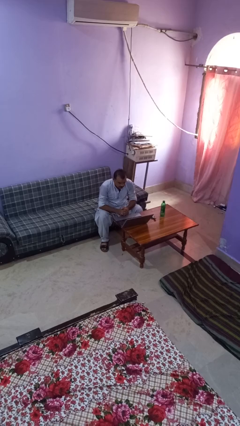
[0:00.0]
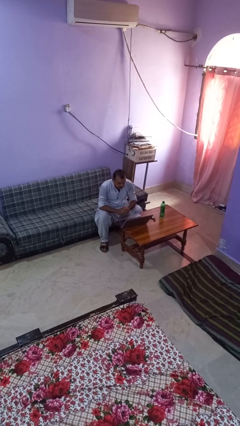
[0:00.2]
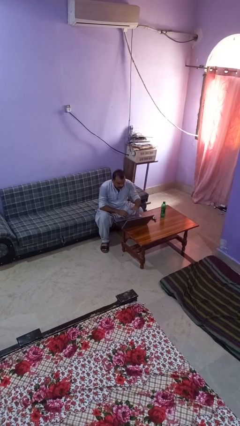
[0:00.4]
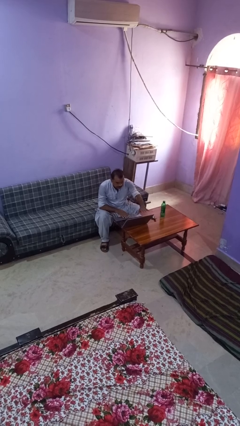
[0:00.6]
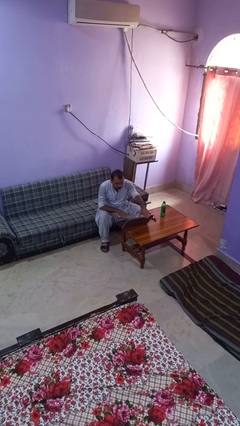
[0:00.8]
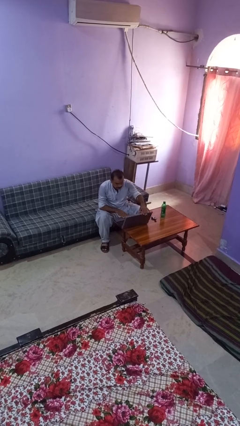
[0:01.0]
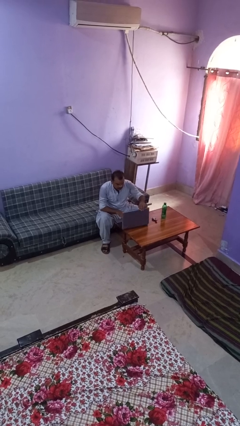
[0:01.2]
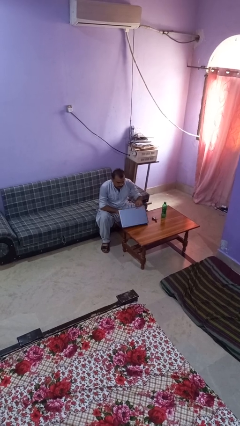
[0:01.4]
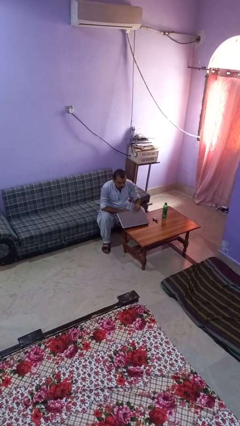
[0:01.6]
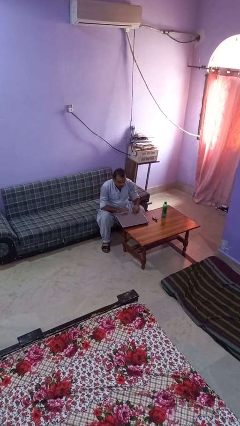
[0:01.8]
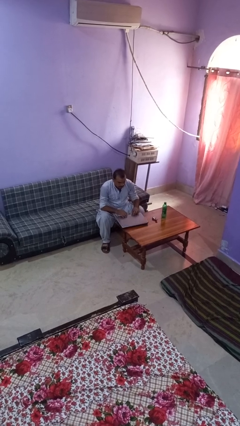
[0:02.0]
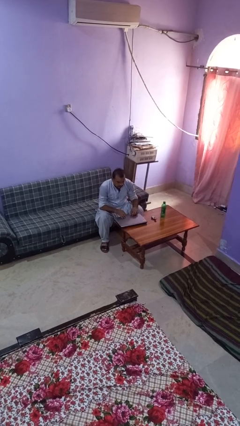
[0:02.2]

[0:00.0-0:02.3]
person closes laptop

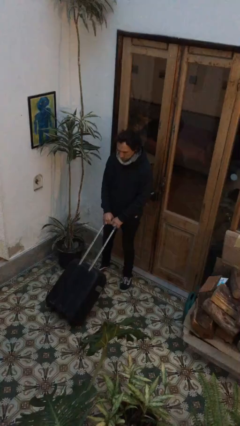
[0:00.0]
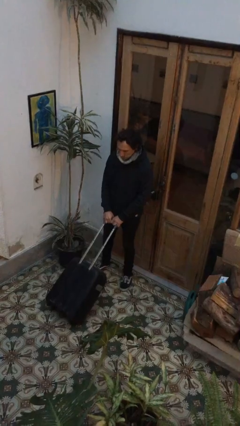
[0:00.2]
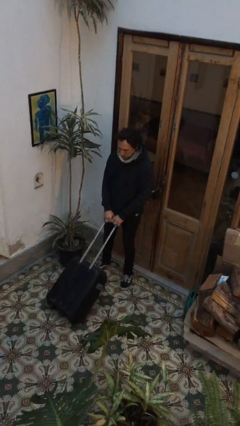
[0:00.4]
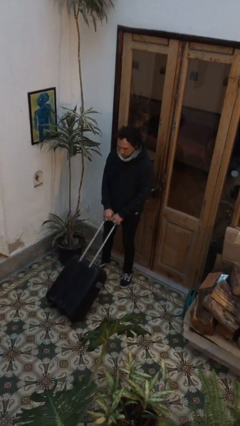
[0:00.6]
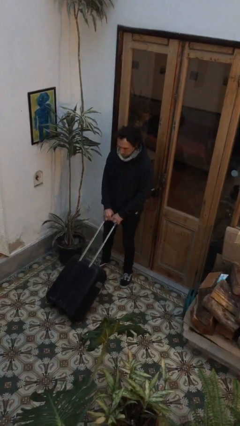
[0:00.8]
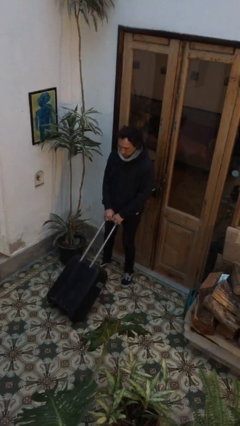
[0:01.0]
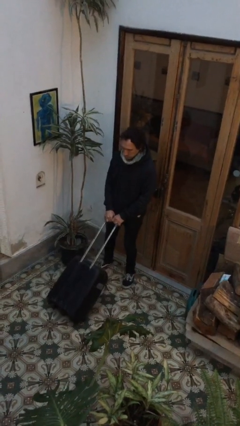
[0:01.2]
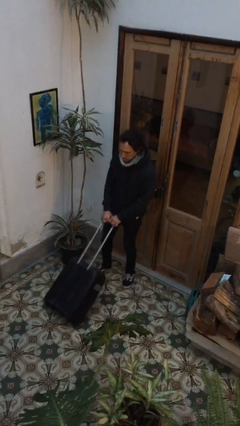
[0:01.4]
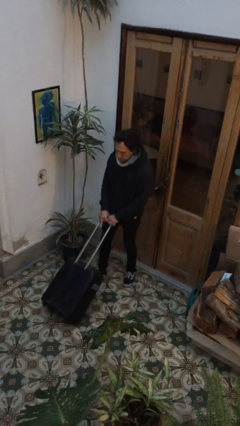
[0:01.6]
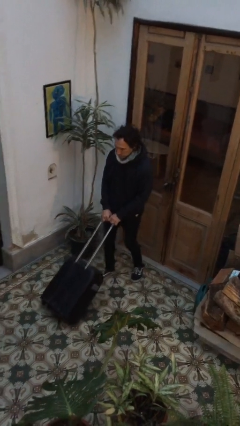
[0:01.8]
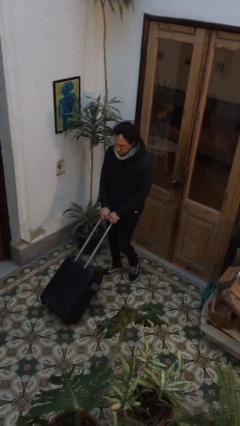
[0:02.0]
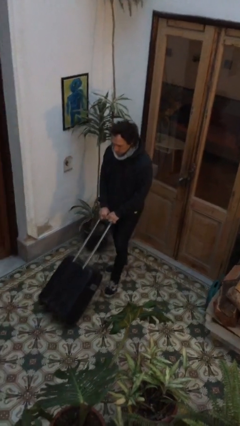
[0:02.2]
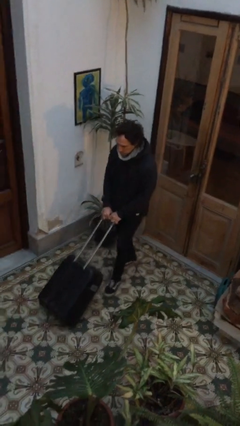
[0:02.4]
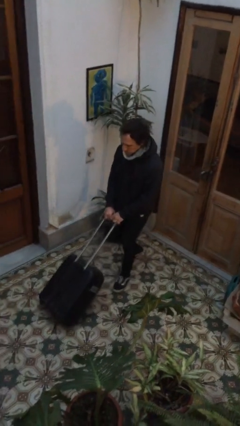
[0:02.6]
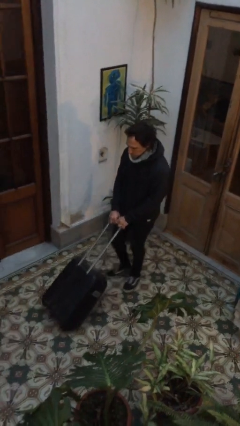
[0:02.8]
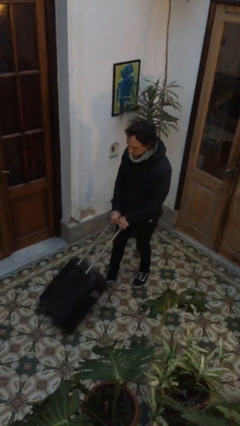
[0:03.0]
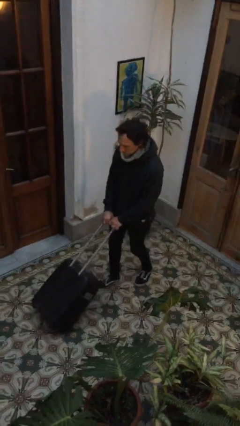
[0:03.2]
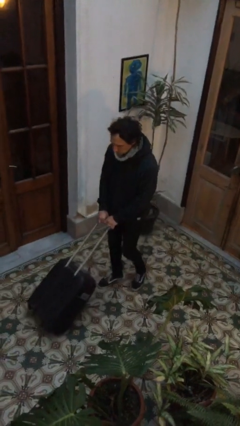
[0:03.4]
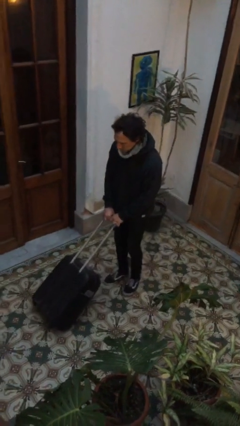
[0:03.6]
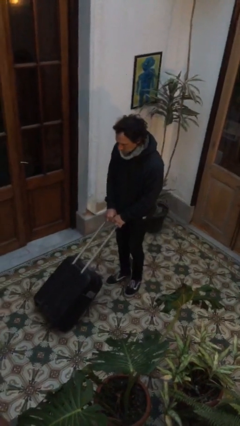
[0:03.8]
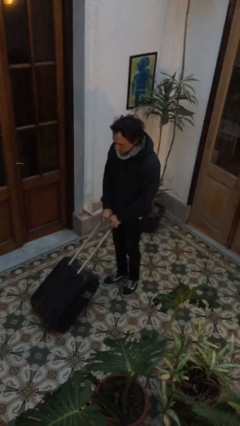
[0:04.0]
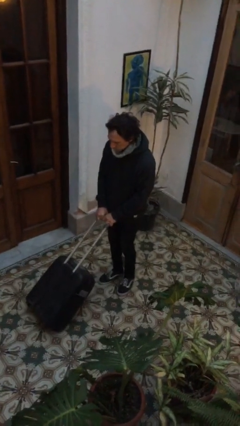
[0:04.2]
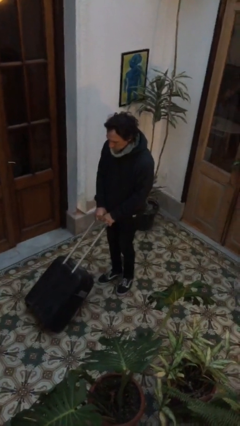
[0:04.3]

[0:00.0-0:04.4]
person pushes wheeled cart

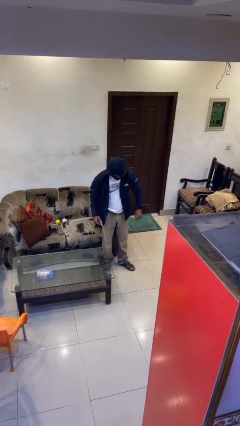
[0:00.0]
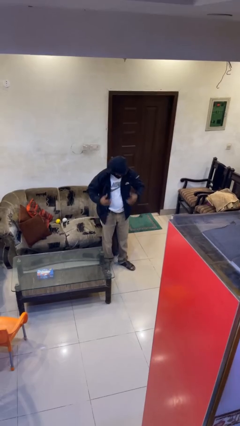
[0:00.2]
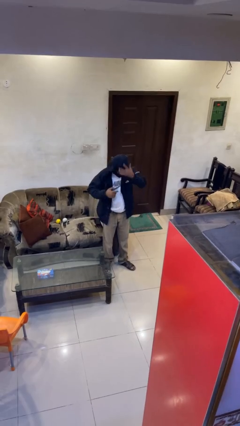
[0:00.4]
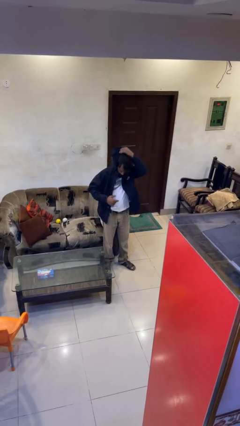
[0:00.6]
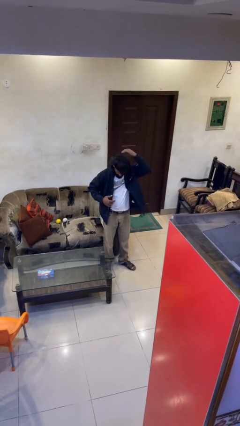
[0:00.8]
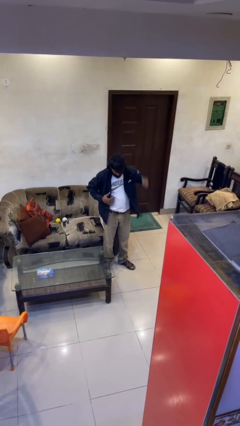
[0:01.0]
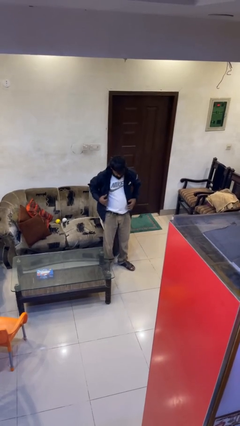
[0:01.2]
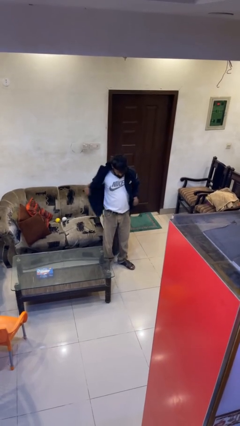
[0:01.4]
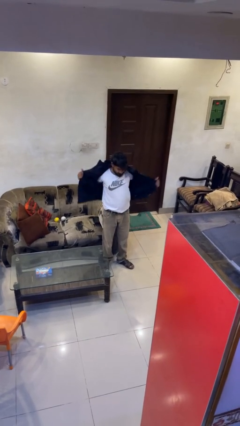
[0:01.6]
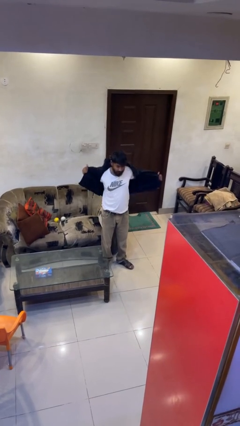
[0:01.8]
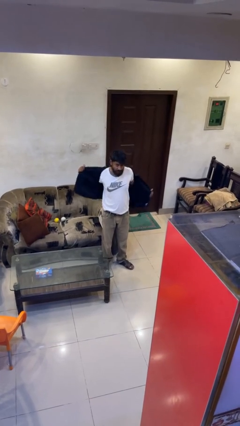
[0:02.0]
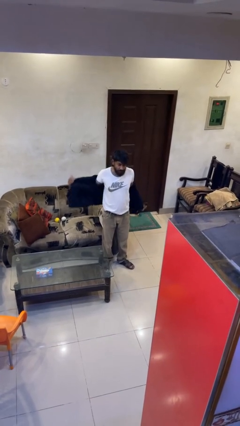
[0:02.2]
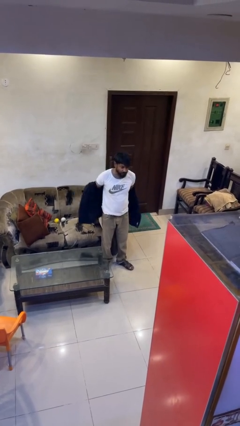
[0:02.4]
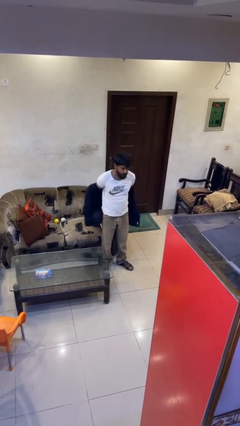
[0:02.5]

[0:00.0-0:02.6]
person takes off hoodie

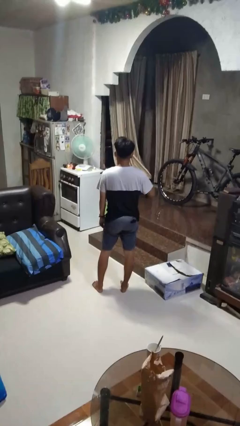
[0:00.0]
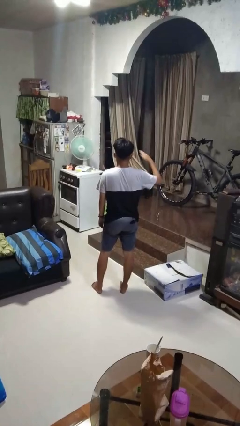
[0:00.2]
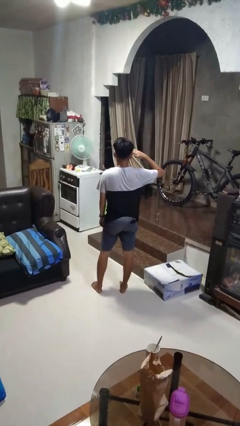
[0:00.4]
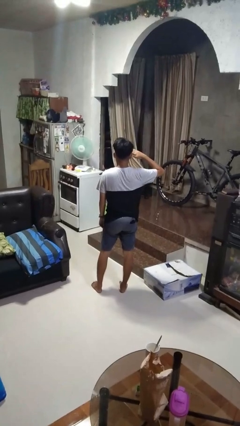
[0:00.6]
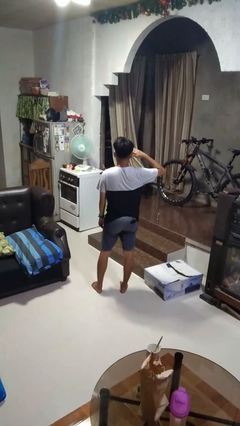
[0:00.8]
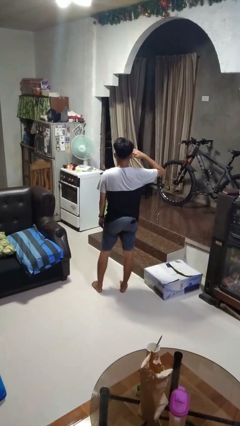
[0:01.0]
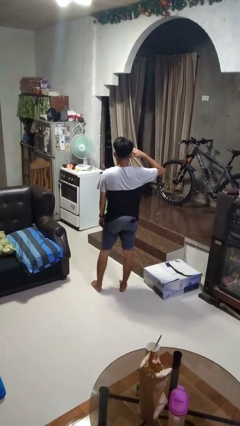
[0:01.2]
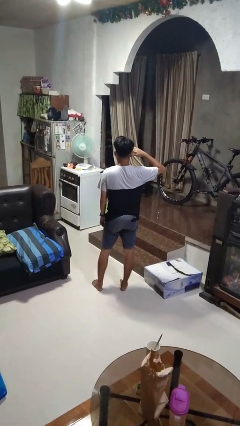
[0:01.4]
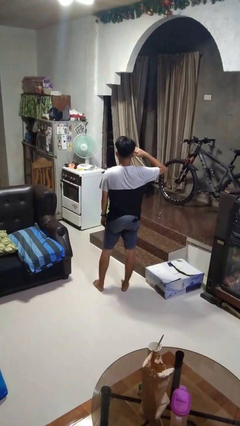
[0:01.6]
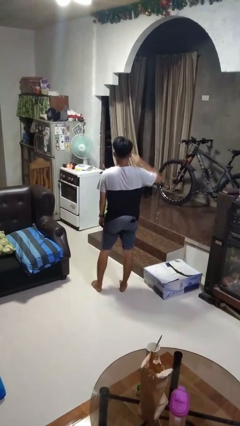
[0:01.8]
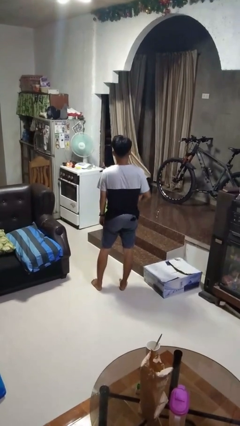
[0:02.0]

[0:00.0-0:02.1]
person salutes

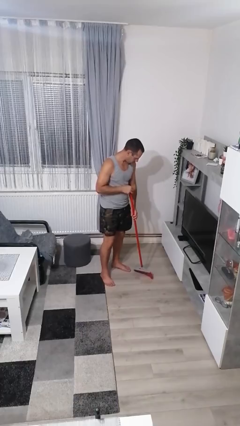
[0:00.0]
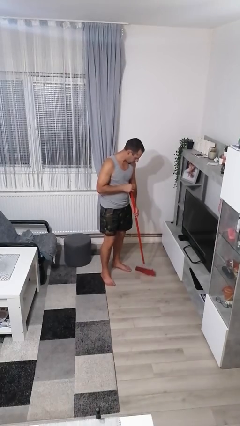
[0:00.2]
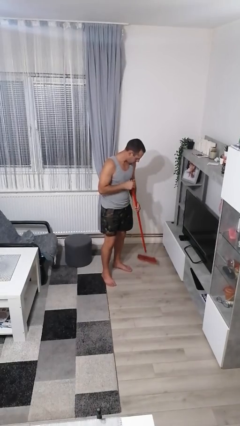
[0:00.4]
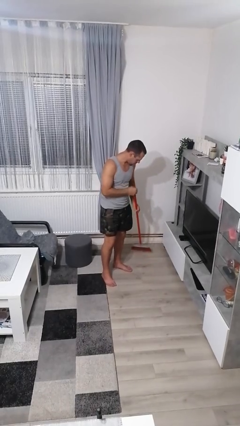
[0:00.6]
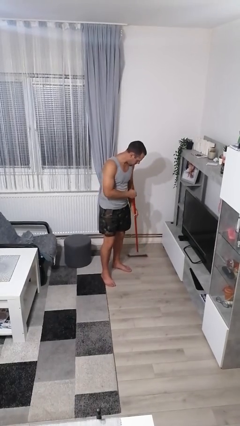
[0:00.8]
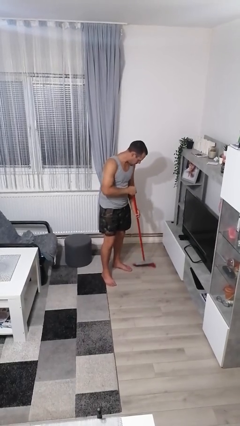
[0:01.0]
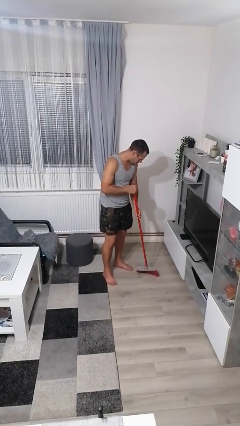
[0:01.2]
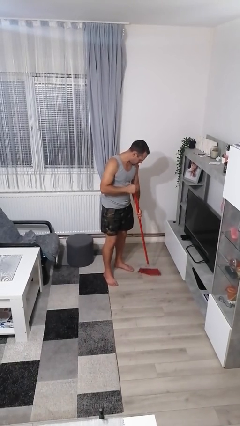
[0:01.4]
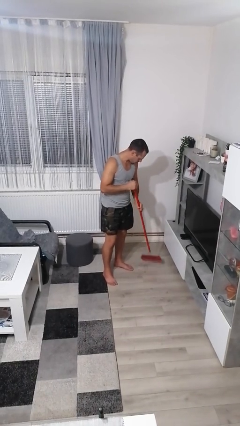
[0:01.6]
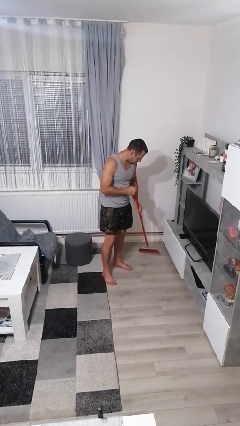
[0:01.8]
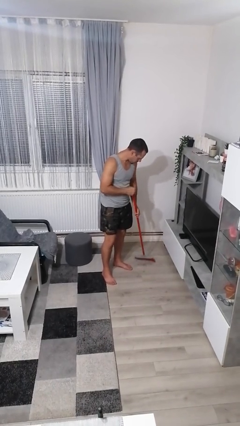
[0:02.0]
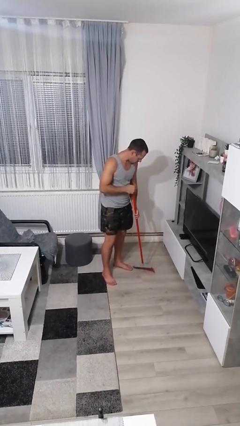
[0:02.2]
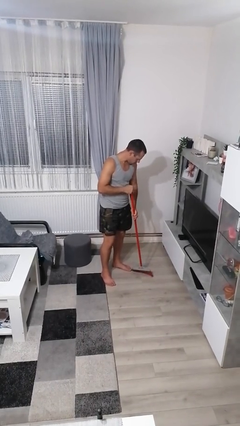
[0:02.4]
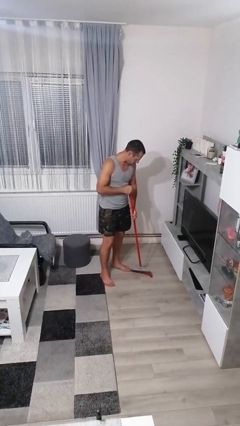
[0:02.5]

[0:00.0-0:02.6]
person sweeps floor

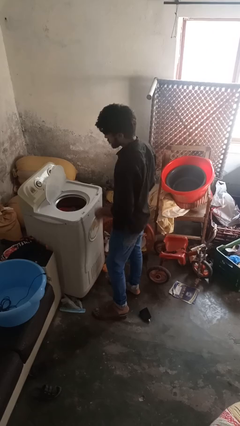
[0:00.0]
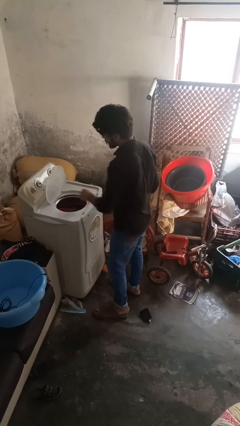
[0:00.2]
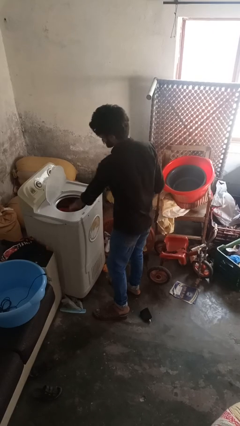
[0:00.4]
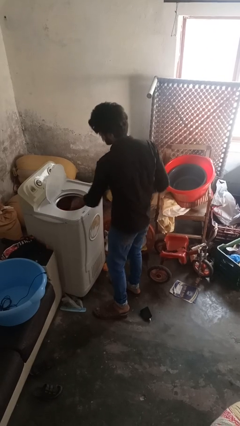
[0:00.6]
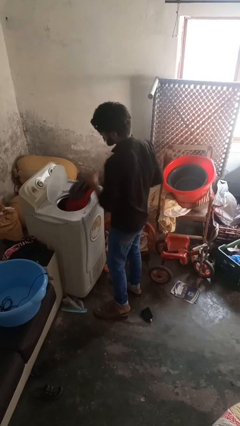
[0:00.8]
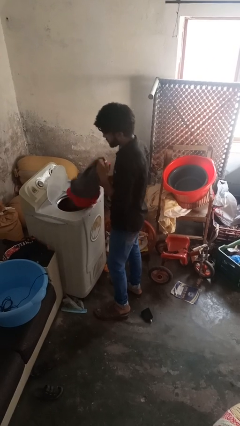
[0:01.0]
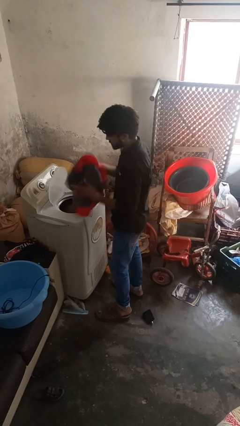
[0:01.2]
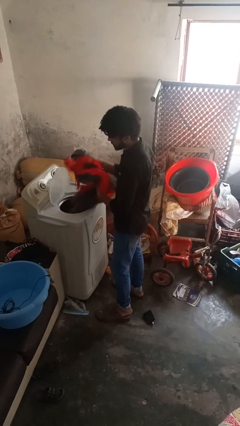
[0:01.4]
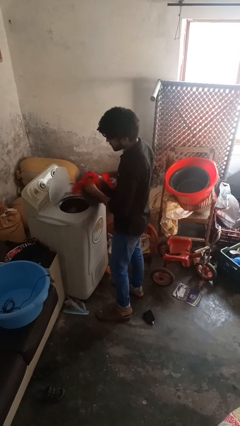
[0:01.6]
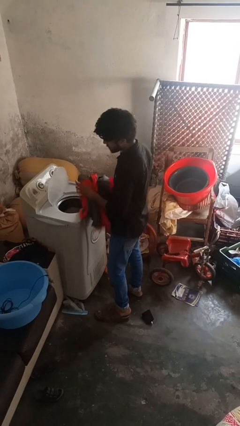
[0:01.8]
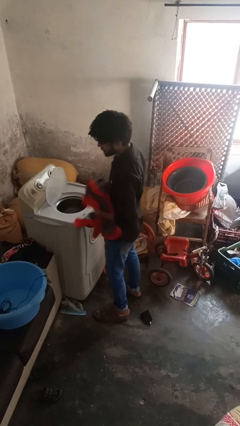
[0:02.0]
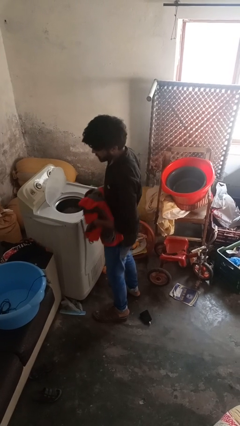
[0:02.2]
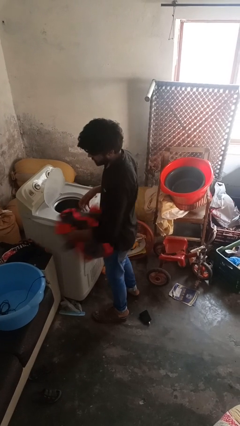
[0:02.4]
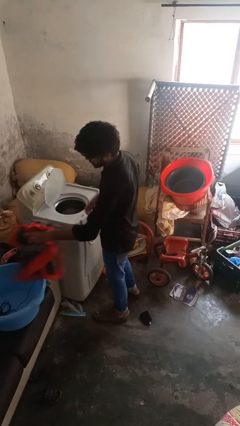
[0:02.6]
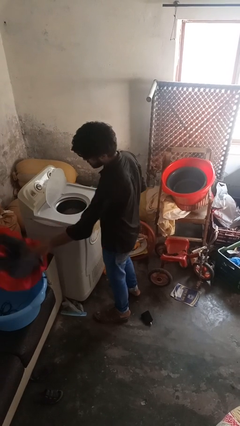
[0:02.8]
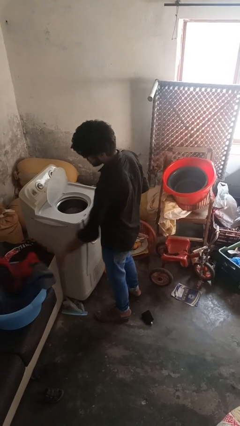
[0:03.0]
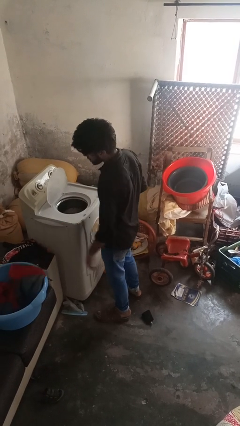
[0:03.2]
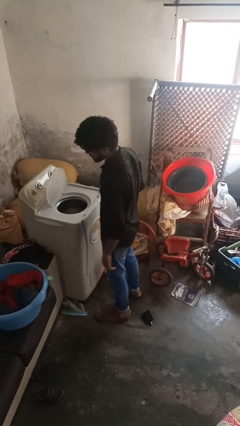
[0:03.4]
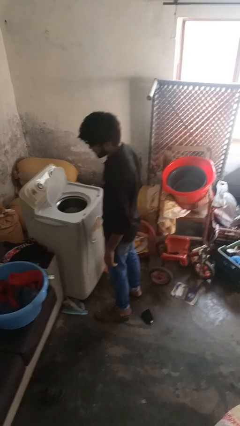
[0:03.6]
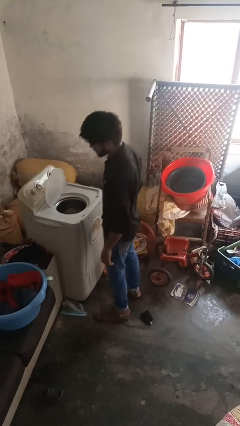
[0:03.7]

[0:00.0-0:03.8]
person loads clotheswasher
